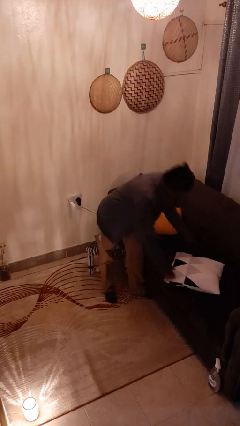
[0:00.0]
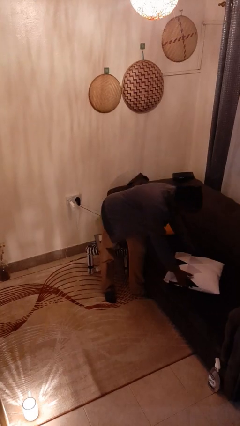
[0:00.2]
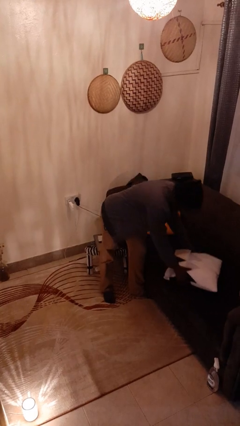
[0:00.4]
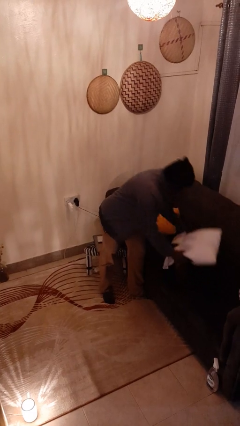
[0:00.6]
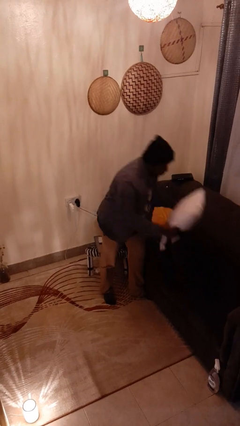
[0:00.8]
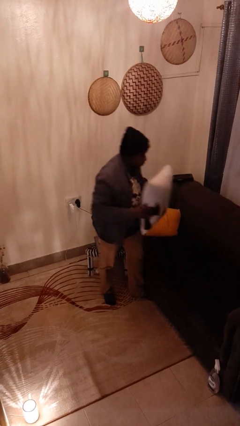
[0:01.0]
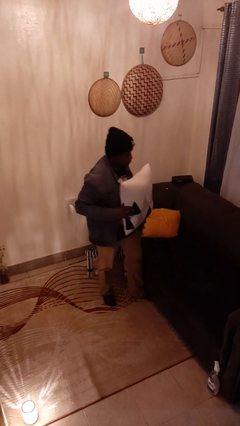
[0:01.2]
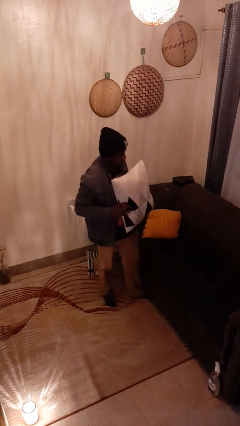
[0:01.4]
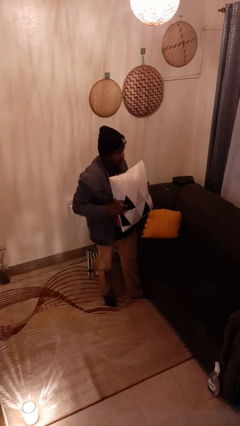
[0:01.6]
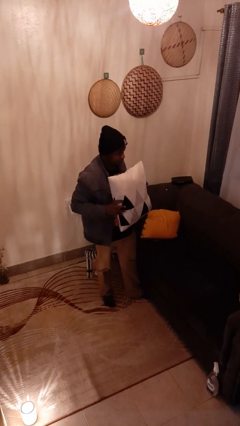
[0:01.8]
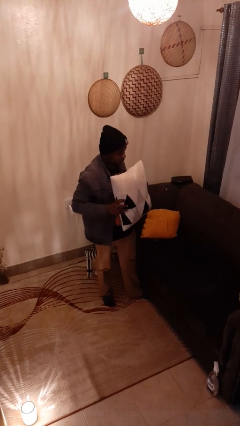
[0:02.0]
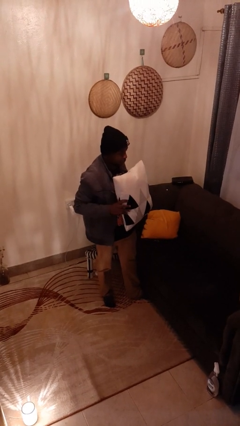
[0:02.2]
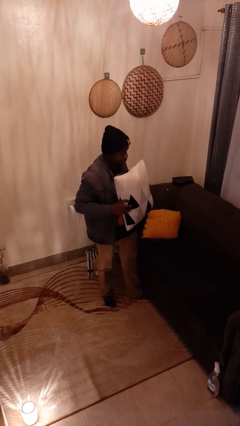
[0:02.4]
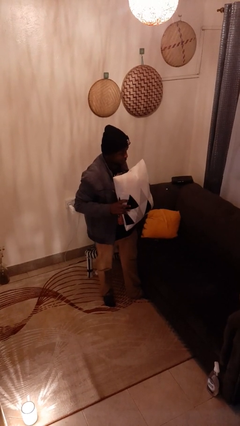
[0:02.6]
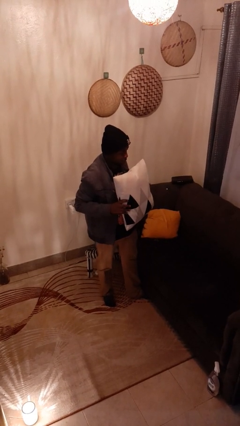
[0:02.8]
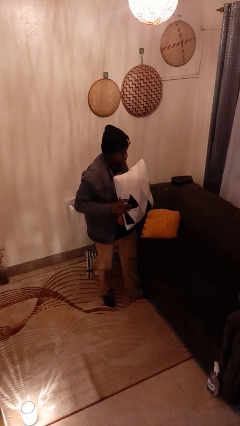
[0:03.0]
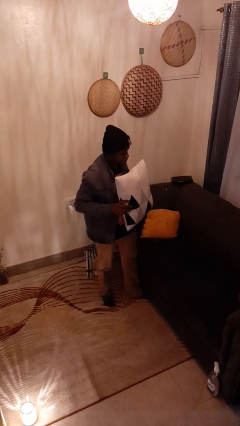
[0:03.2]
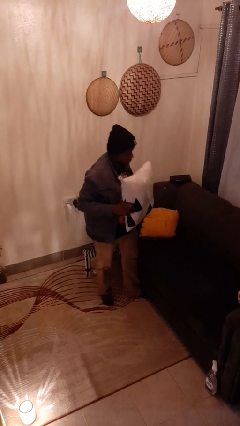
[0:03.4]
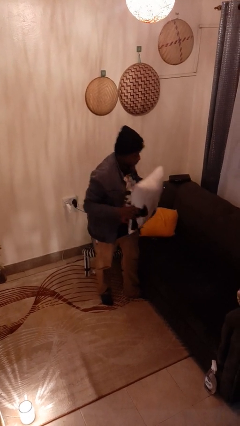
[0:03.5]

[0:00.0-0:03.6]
person picks up object from couch

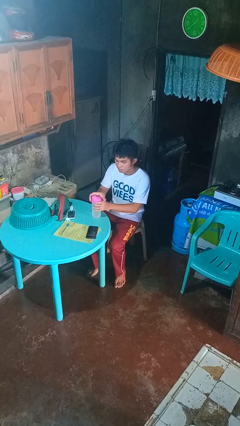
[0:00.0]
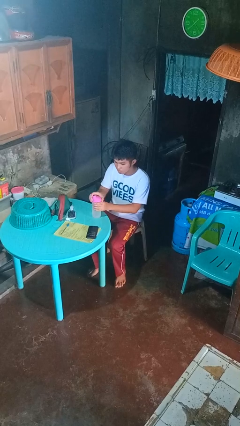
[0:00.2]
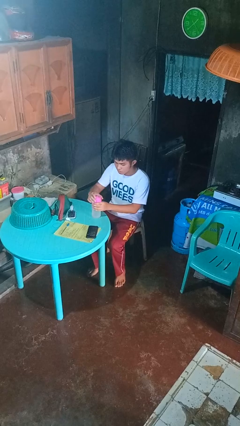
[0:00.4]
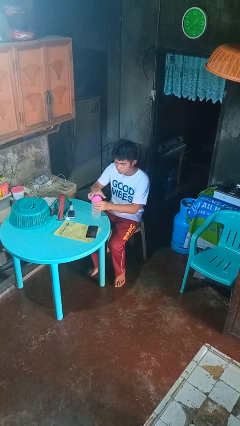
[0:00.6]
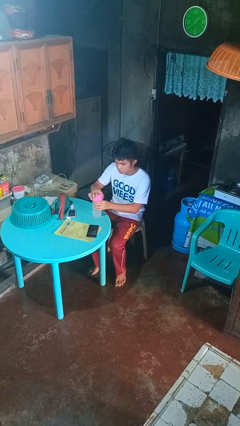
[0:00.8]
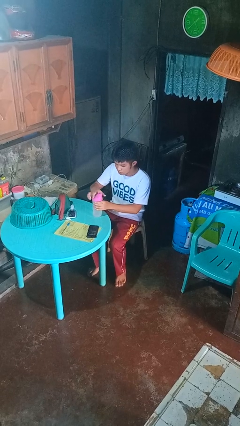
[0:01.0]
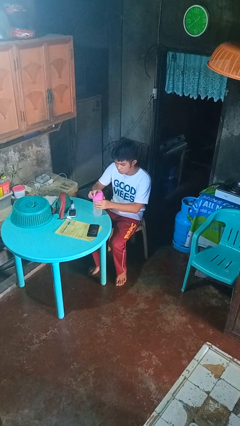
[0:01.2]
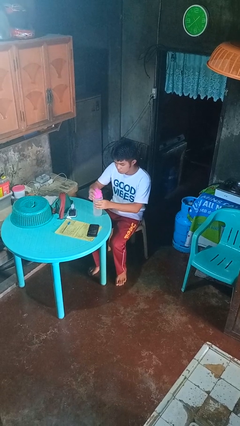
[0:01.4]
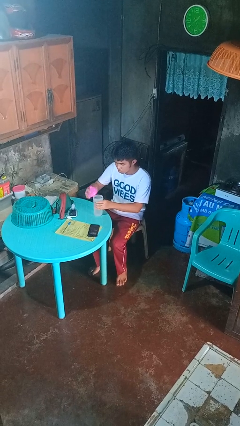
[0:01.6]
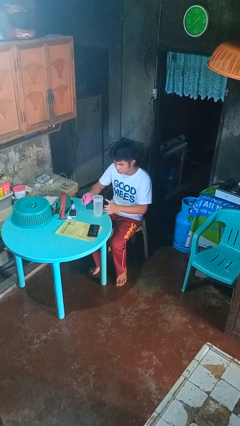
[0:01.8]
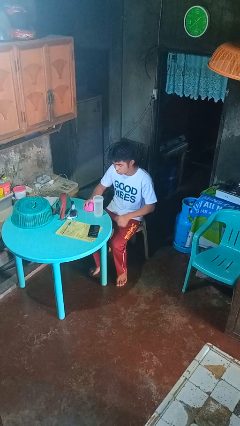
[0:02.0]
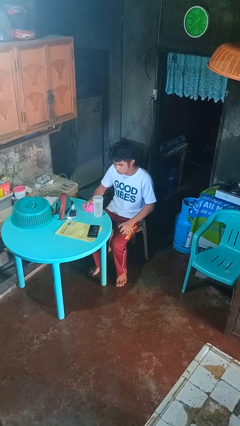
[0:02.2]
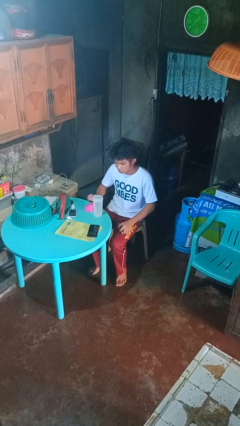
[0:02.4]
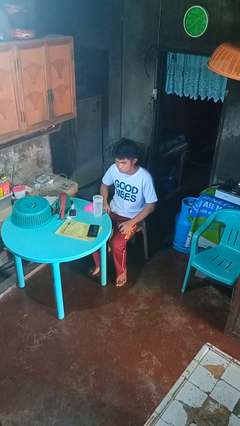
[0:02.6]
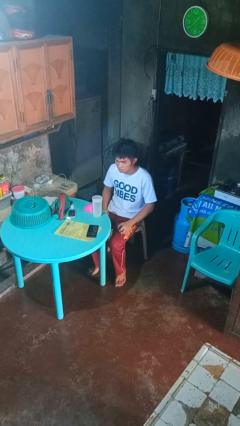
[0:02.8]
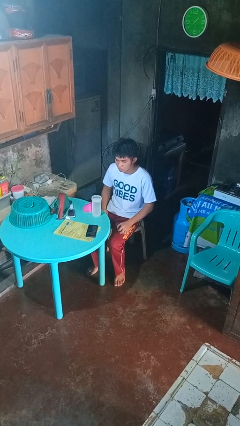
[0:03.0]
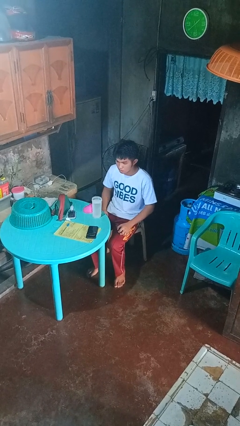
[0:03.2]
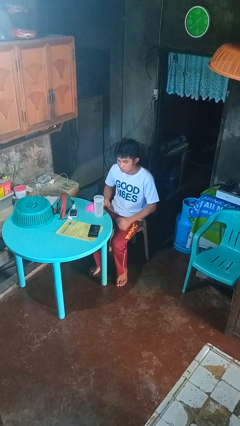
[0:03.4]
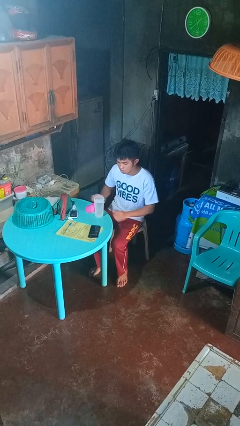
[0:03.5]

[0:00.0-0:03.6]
person unscrews lid from bottle

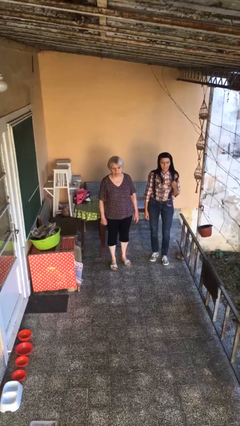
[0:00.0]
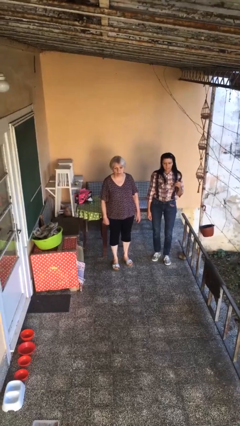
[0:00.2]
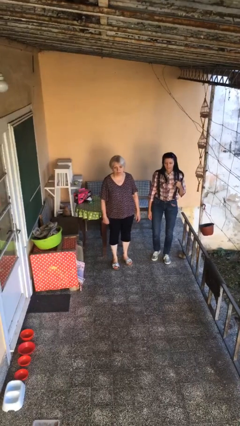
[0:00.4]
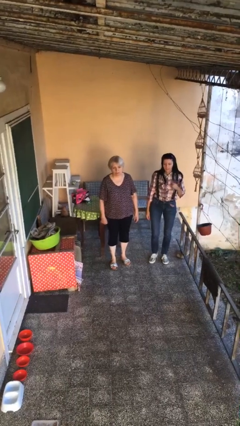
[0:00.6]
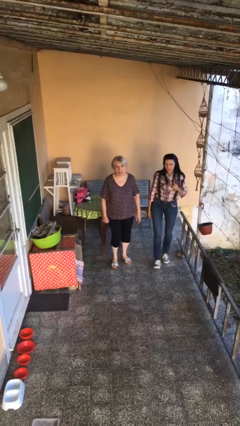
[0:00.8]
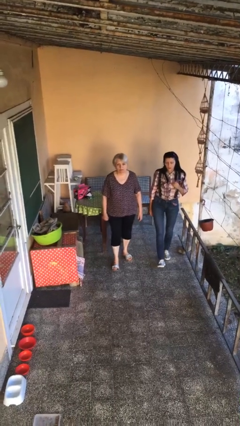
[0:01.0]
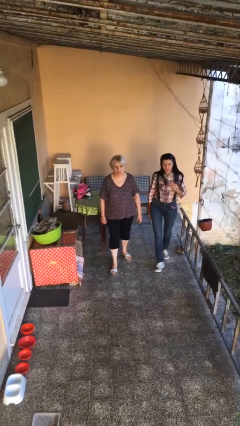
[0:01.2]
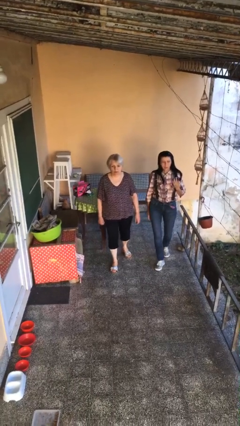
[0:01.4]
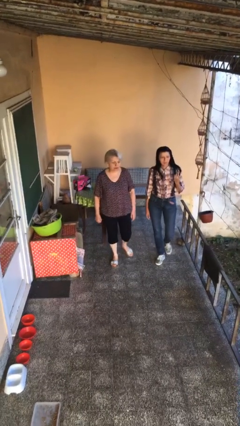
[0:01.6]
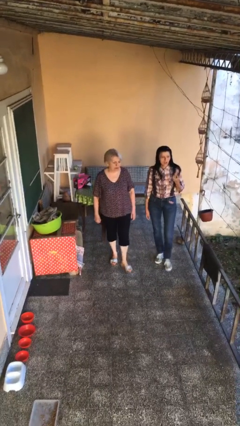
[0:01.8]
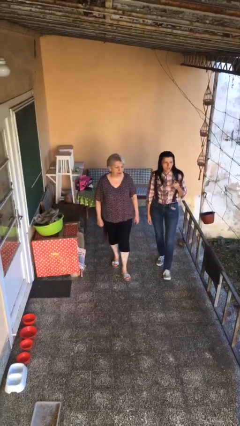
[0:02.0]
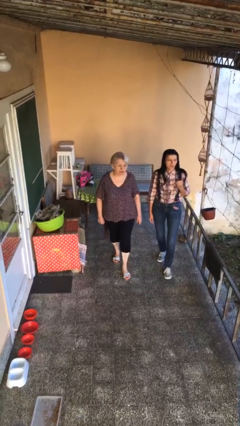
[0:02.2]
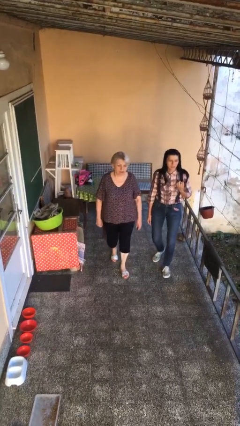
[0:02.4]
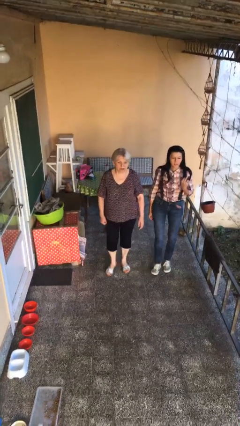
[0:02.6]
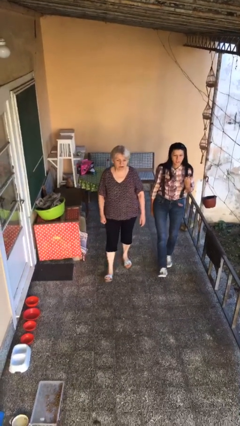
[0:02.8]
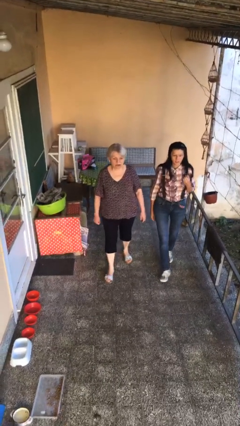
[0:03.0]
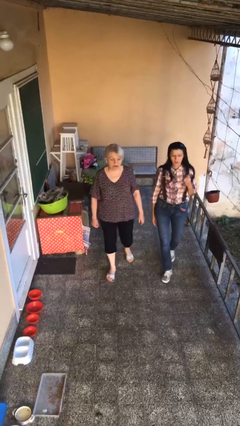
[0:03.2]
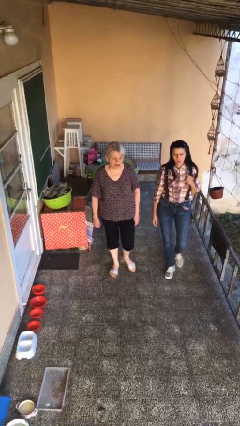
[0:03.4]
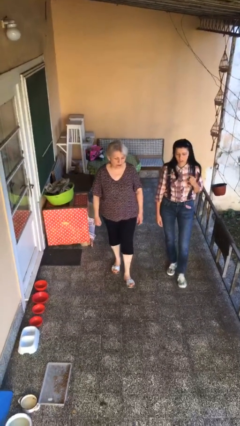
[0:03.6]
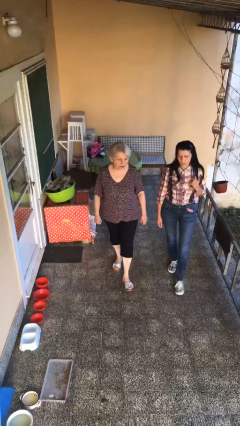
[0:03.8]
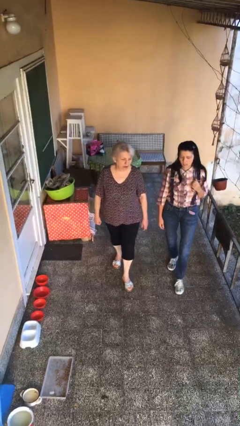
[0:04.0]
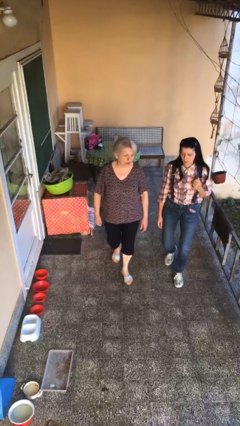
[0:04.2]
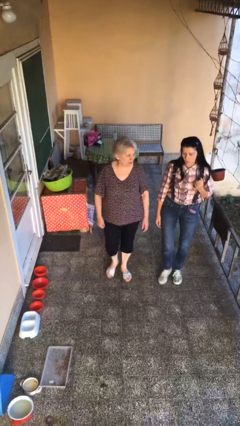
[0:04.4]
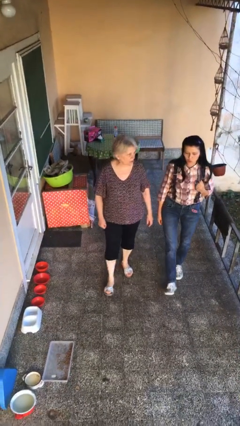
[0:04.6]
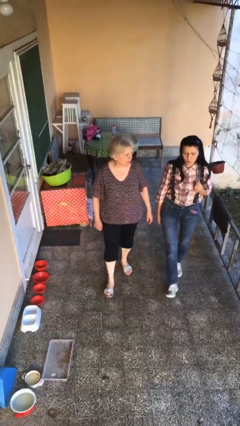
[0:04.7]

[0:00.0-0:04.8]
person talks to person

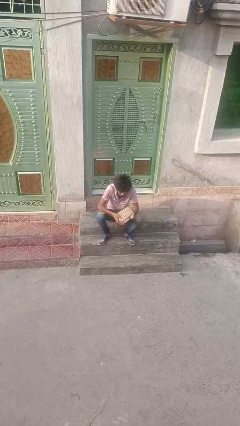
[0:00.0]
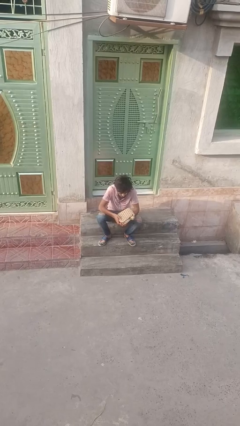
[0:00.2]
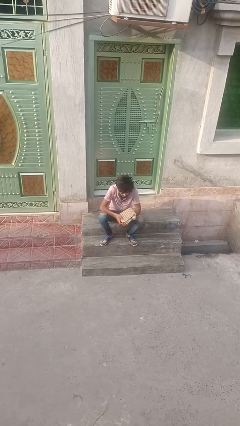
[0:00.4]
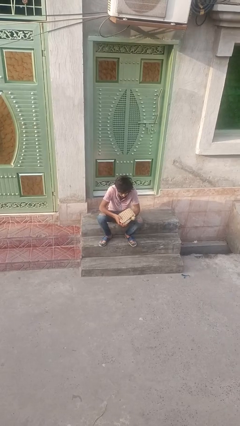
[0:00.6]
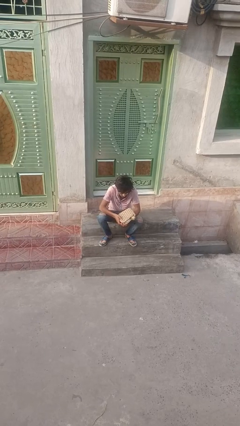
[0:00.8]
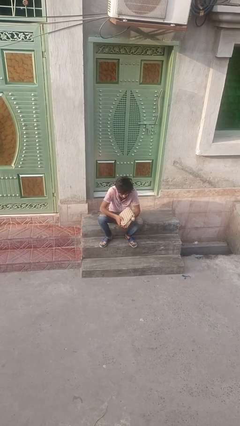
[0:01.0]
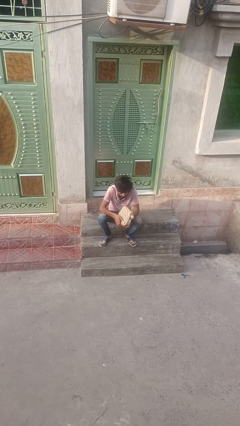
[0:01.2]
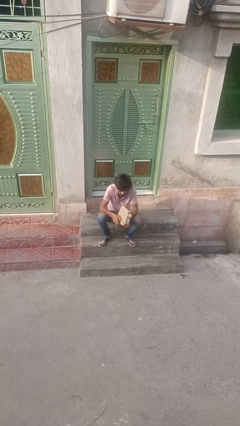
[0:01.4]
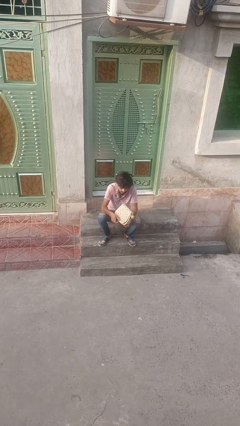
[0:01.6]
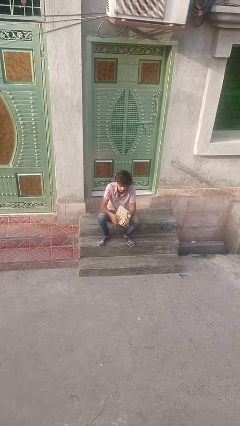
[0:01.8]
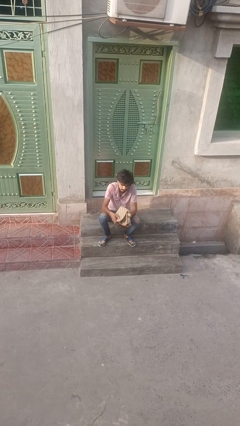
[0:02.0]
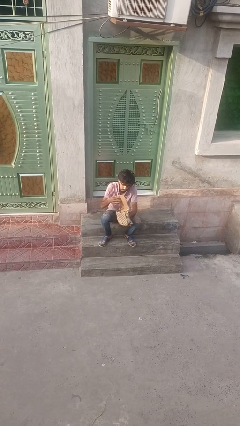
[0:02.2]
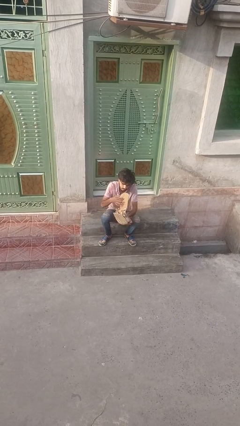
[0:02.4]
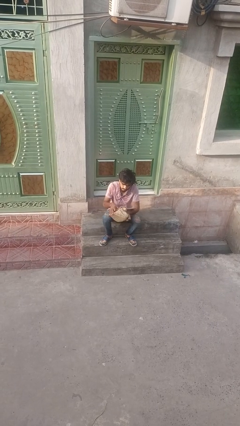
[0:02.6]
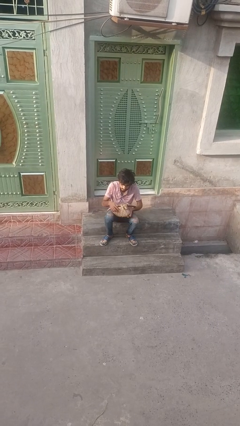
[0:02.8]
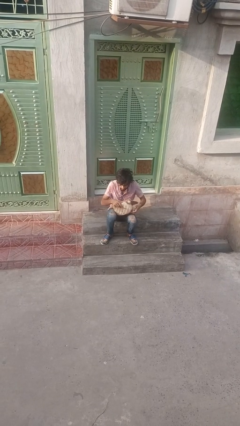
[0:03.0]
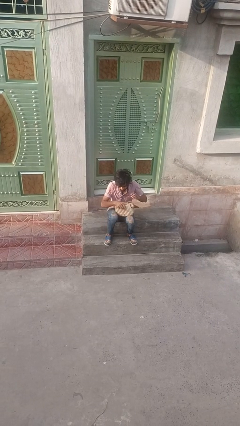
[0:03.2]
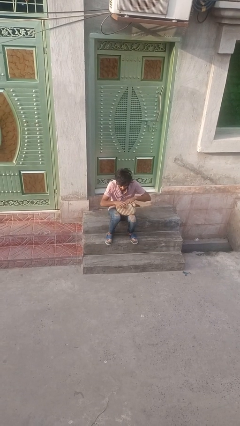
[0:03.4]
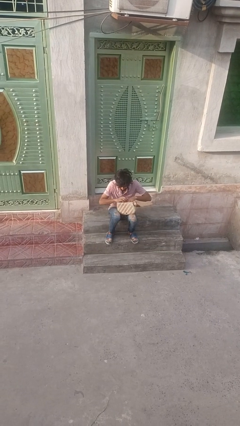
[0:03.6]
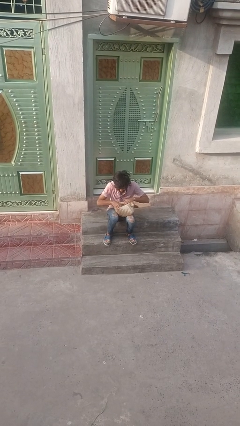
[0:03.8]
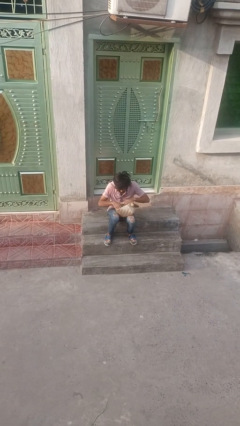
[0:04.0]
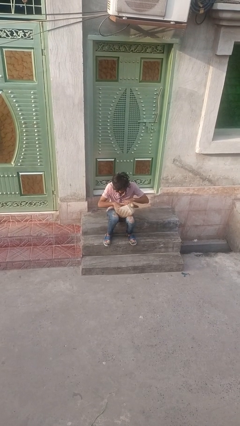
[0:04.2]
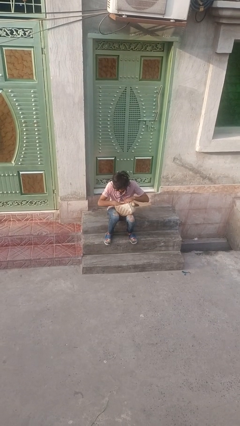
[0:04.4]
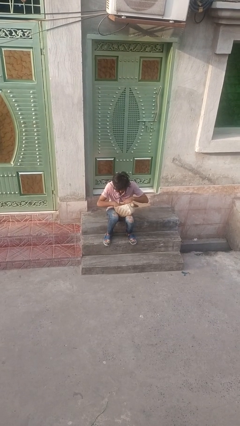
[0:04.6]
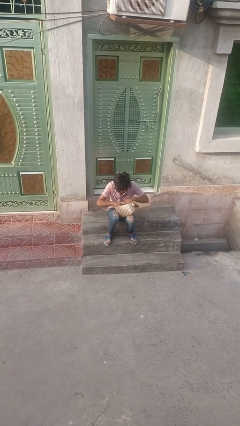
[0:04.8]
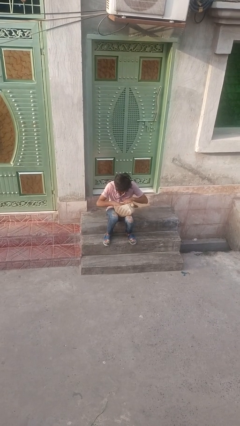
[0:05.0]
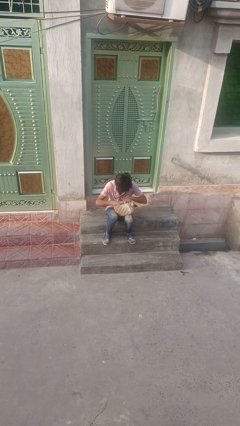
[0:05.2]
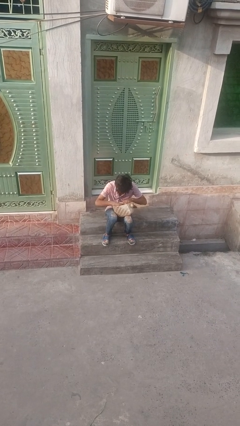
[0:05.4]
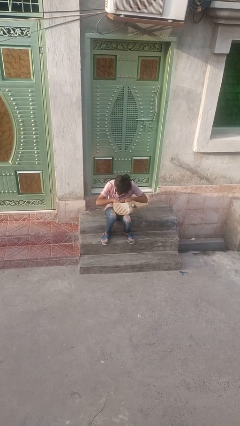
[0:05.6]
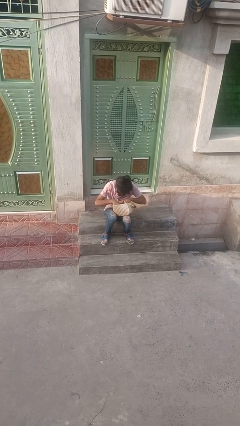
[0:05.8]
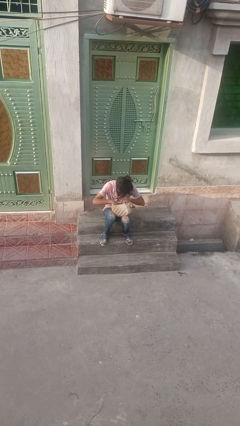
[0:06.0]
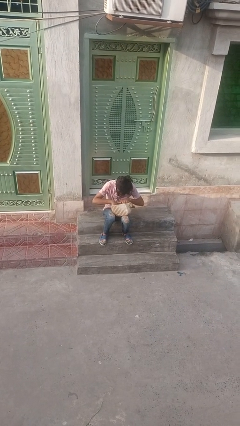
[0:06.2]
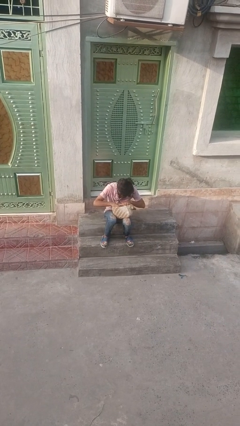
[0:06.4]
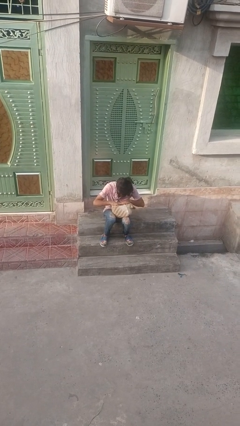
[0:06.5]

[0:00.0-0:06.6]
person searches in backpack
